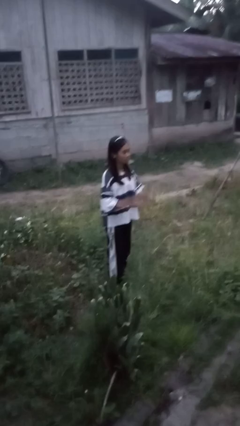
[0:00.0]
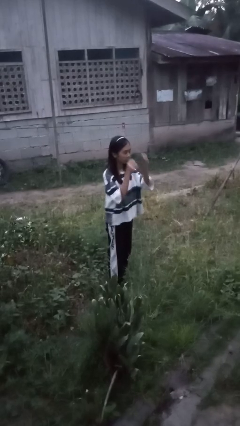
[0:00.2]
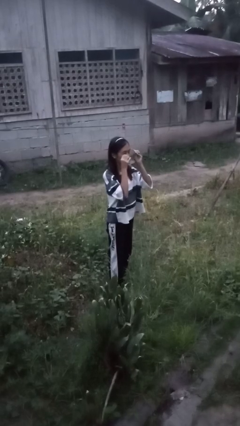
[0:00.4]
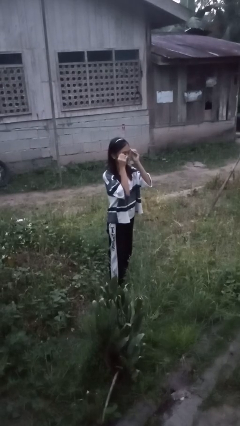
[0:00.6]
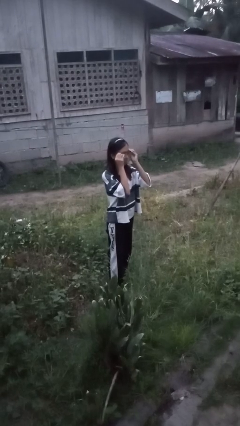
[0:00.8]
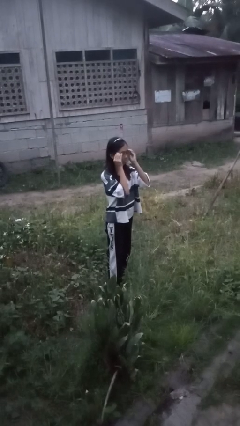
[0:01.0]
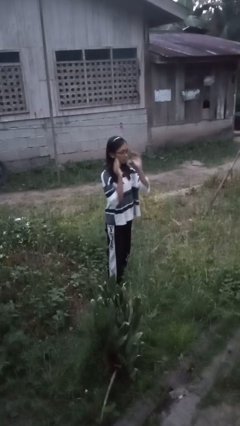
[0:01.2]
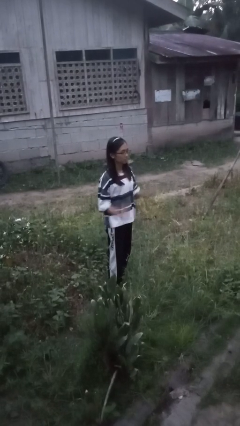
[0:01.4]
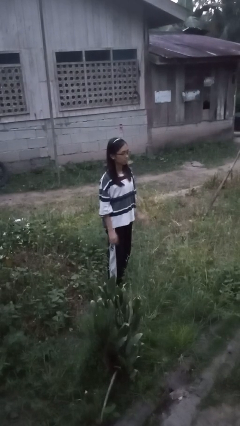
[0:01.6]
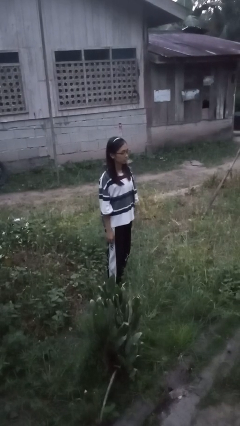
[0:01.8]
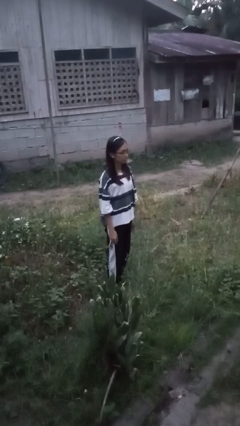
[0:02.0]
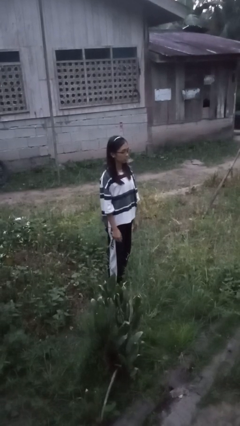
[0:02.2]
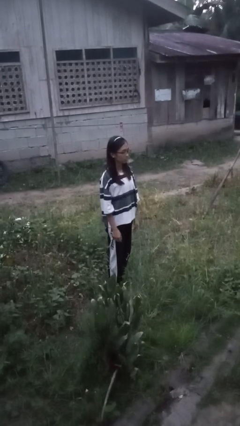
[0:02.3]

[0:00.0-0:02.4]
person puts on glasses

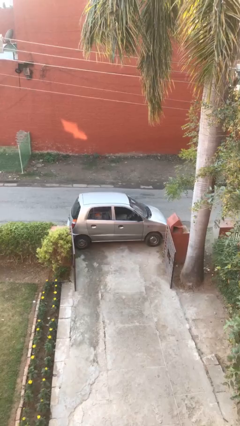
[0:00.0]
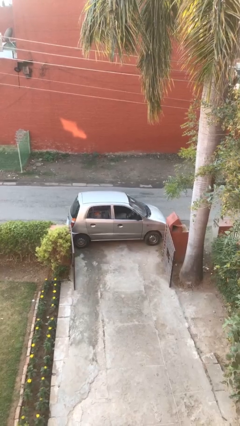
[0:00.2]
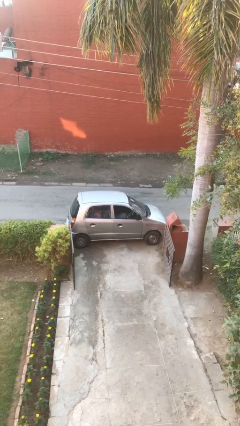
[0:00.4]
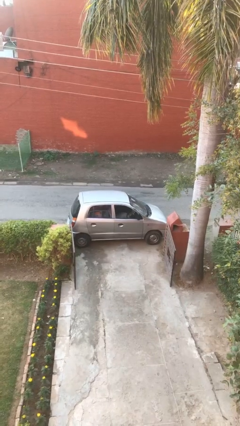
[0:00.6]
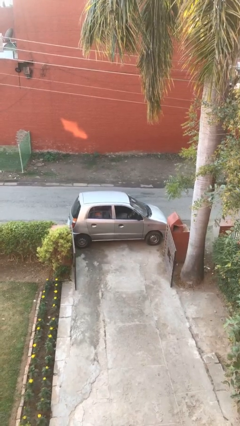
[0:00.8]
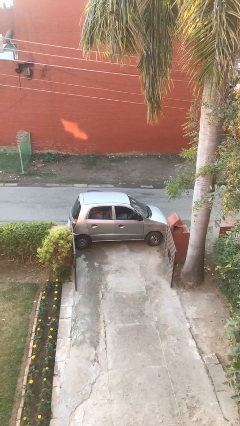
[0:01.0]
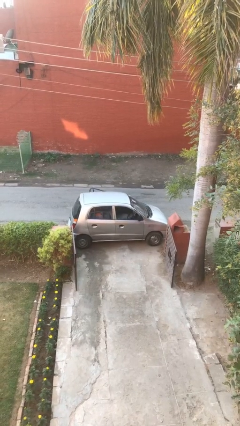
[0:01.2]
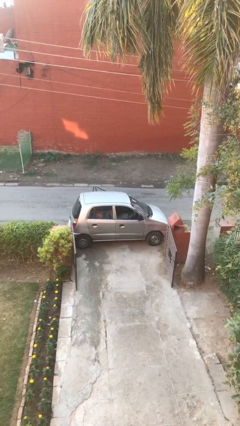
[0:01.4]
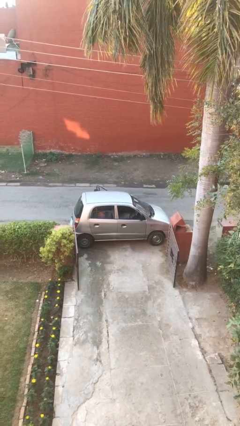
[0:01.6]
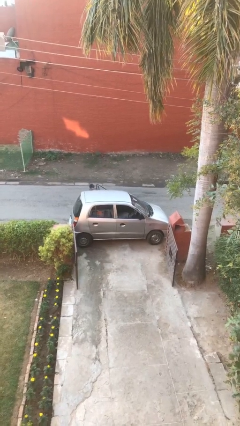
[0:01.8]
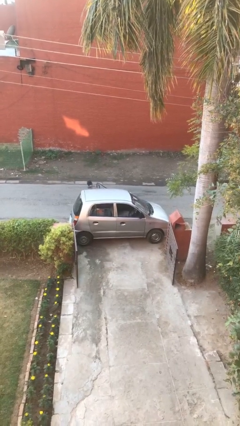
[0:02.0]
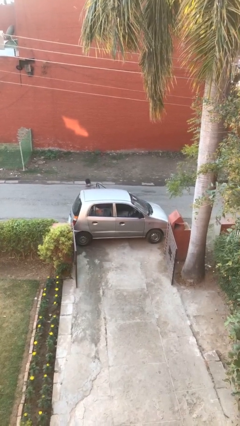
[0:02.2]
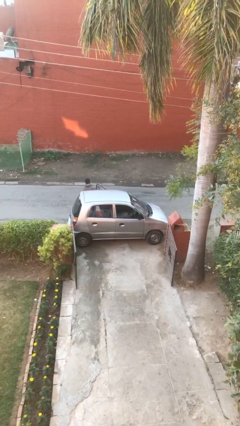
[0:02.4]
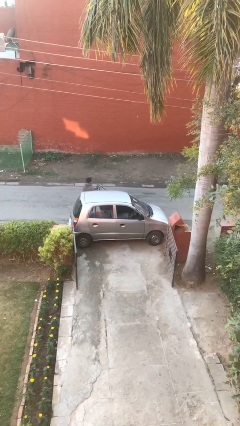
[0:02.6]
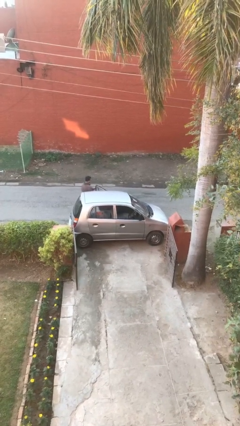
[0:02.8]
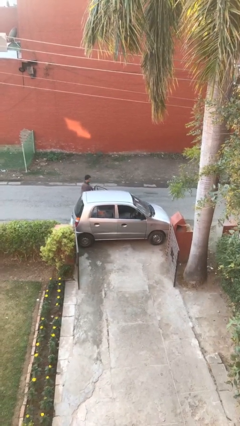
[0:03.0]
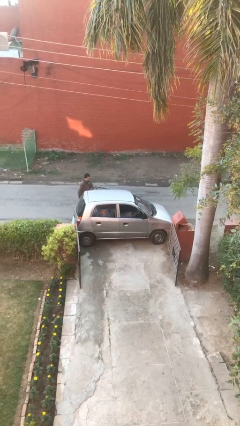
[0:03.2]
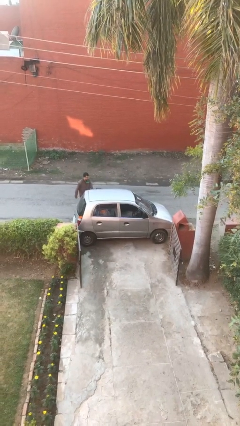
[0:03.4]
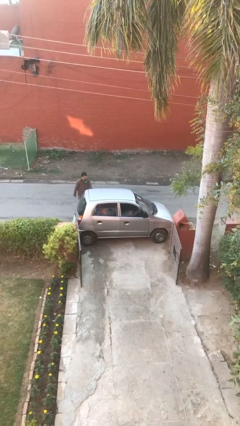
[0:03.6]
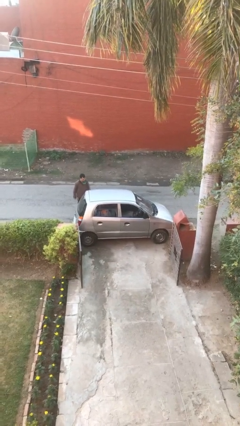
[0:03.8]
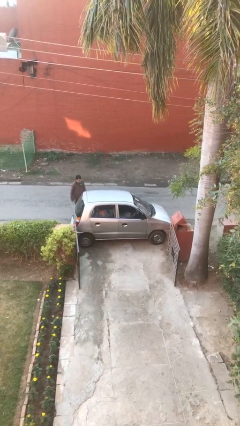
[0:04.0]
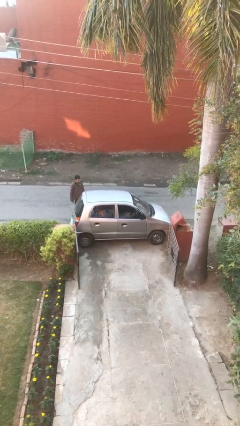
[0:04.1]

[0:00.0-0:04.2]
car drops off person

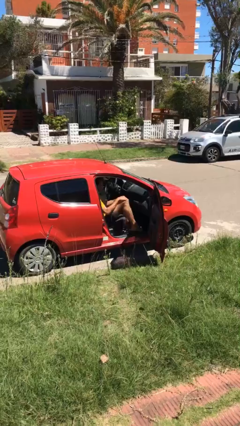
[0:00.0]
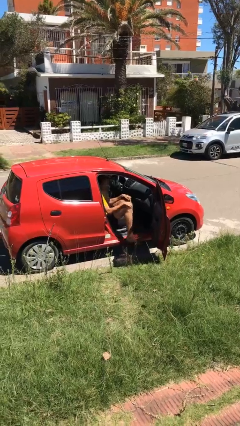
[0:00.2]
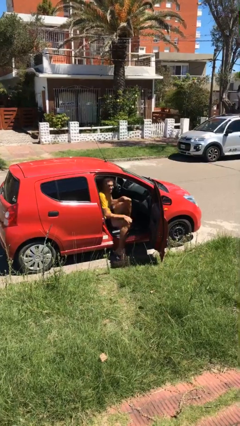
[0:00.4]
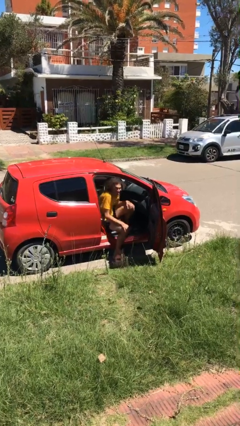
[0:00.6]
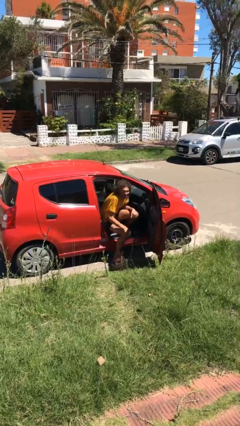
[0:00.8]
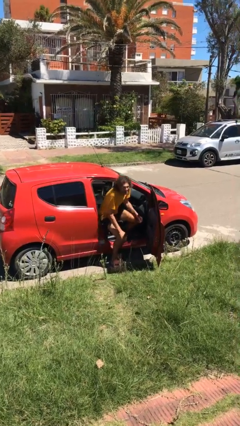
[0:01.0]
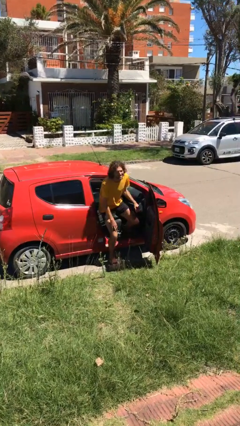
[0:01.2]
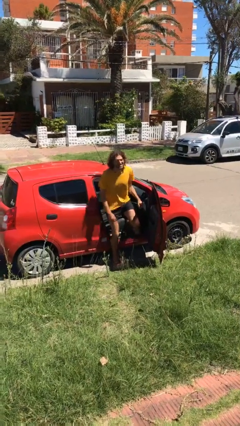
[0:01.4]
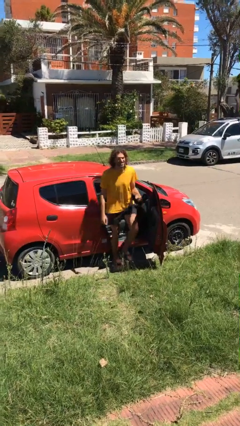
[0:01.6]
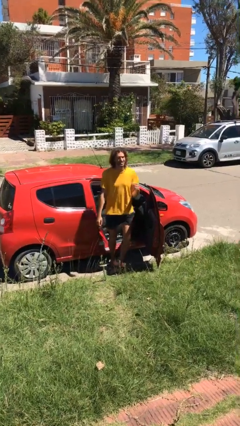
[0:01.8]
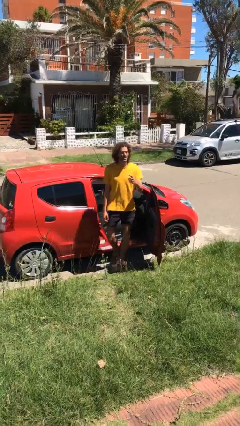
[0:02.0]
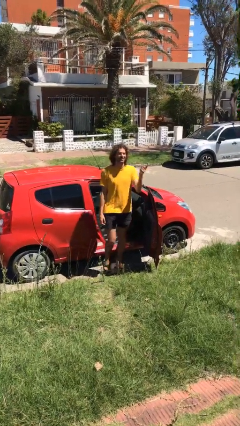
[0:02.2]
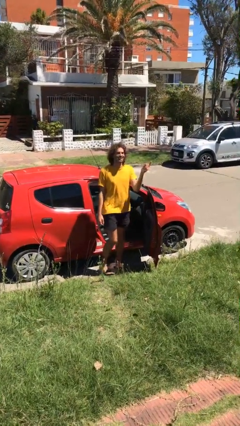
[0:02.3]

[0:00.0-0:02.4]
person exits car

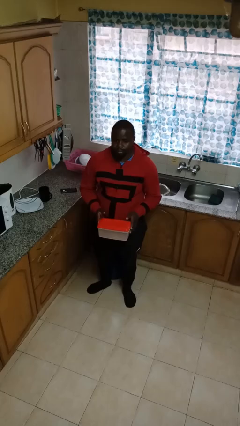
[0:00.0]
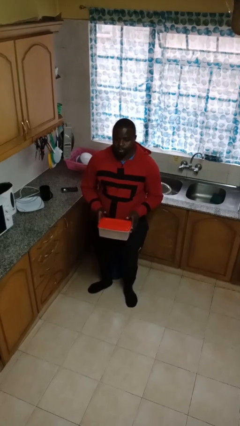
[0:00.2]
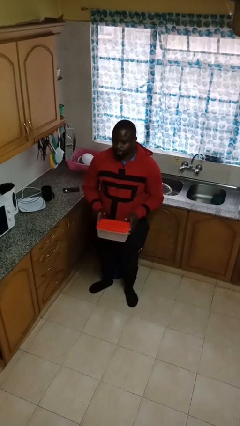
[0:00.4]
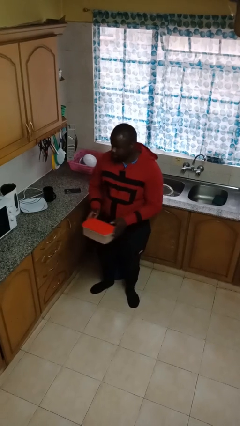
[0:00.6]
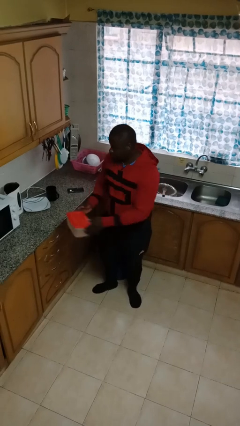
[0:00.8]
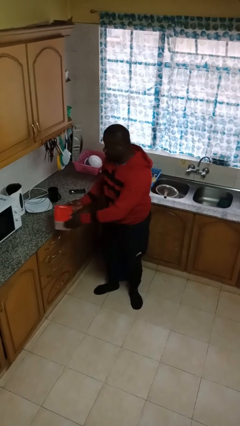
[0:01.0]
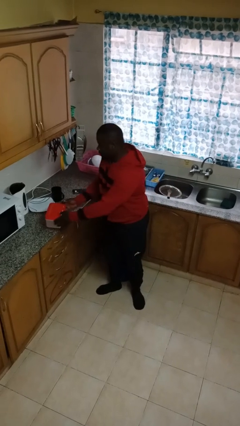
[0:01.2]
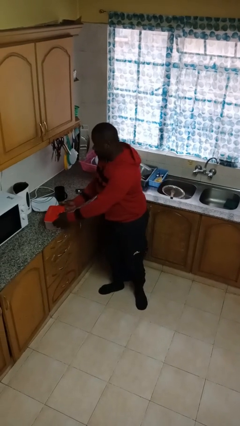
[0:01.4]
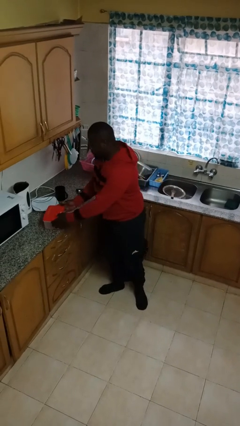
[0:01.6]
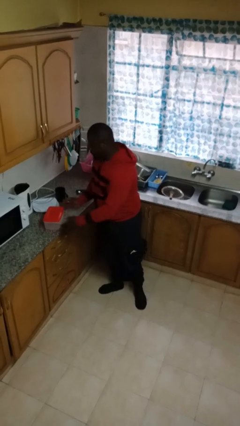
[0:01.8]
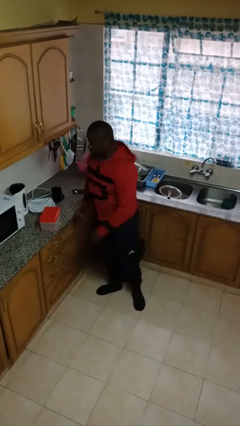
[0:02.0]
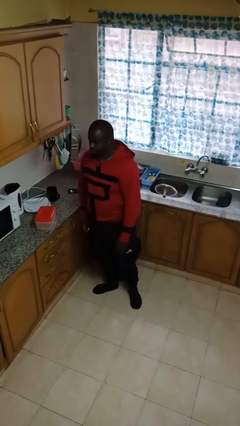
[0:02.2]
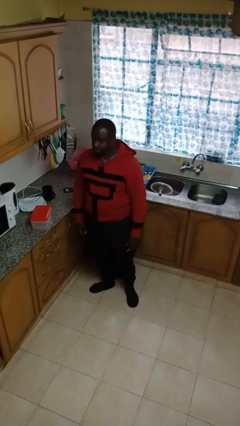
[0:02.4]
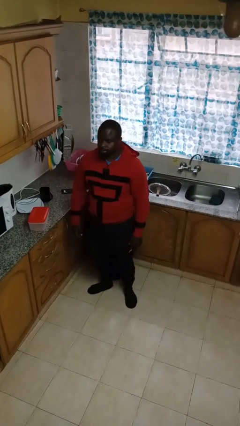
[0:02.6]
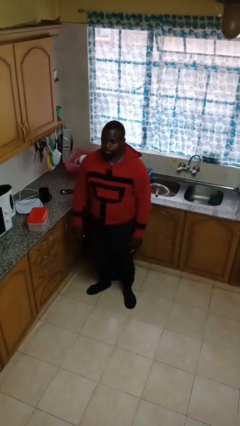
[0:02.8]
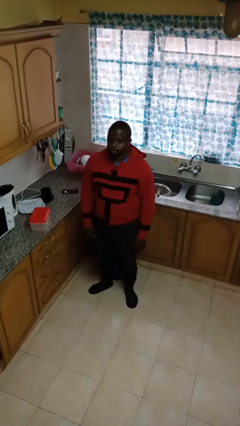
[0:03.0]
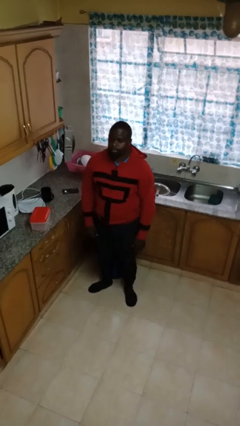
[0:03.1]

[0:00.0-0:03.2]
person puts down object on countertop

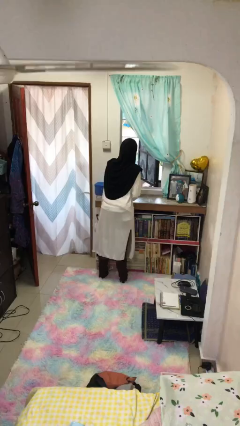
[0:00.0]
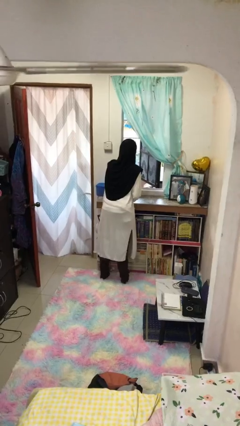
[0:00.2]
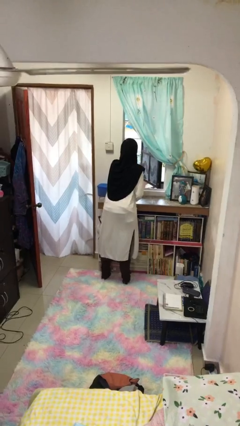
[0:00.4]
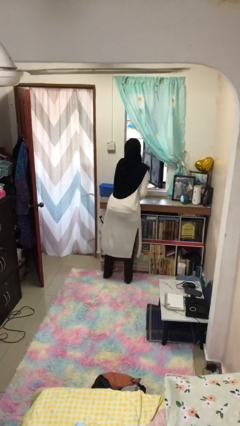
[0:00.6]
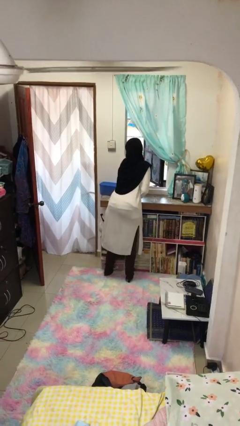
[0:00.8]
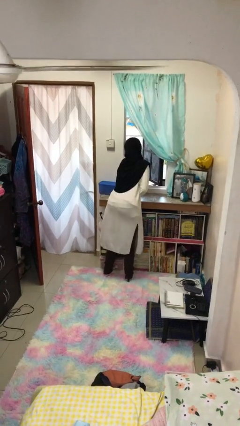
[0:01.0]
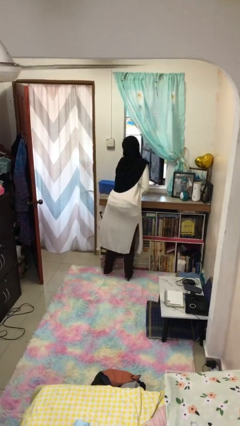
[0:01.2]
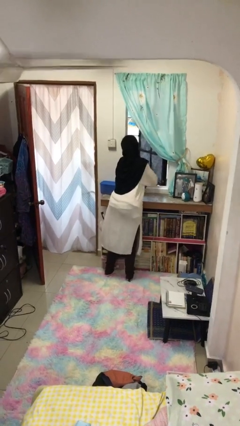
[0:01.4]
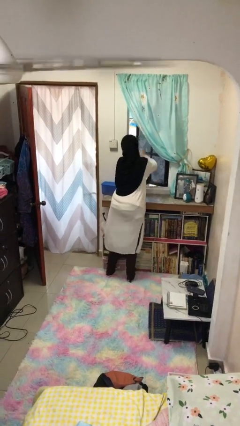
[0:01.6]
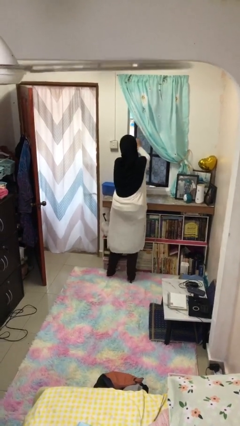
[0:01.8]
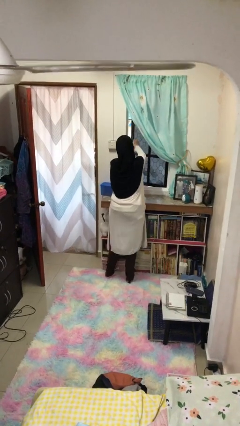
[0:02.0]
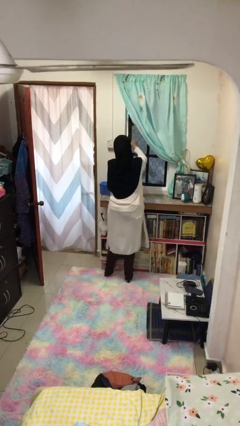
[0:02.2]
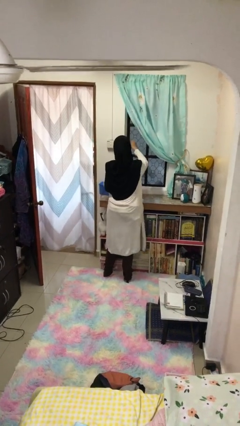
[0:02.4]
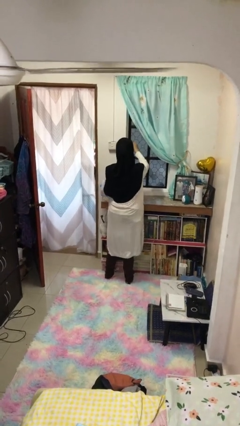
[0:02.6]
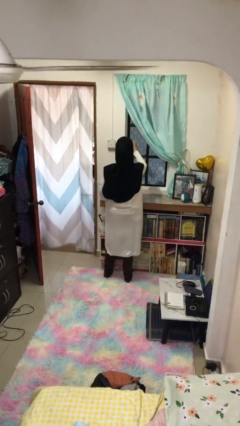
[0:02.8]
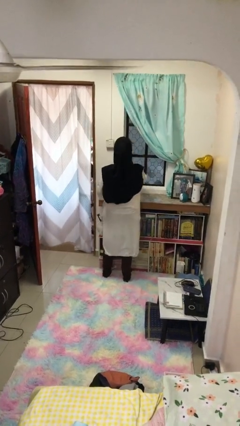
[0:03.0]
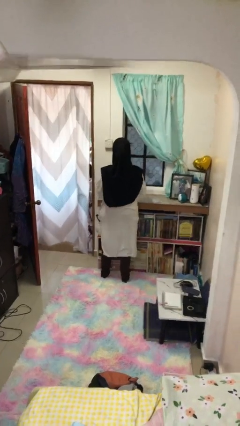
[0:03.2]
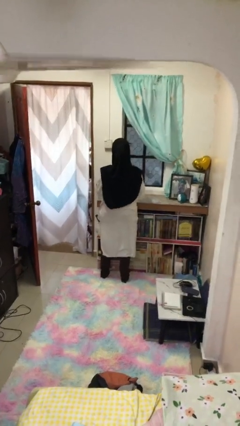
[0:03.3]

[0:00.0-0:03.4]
person closes home window

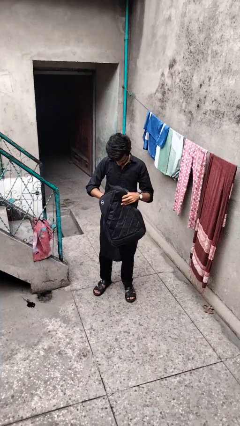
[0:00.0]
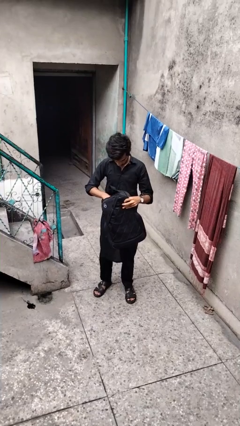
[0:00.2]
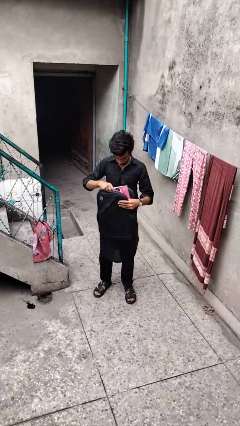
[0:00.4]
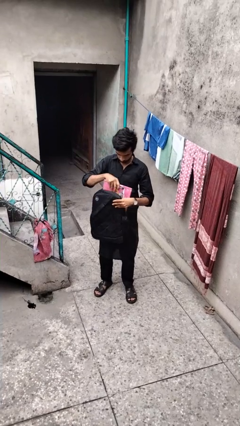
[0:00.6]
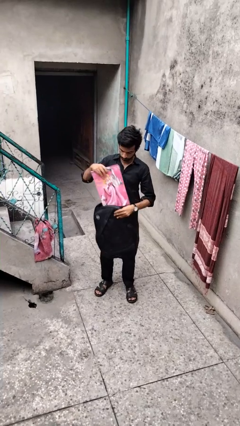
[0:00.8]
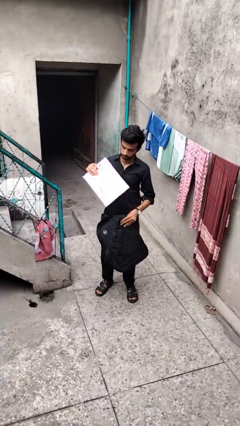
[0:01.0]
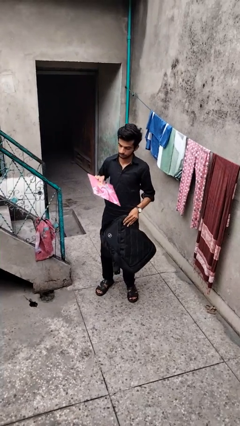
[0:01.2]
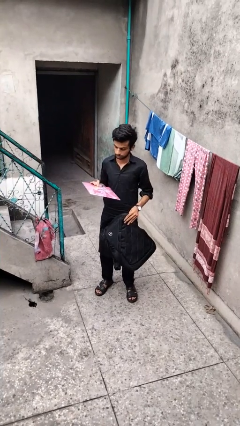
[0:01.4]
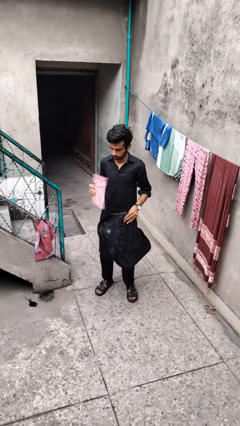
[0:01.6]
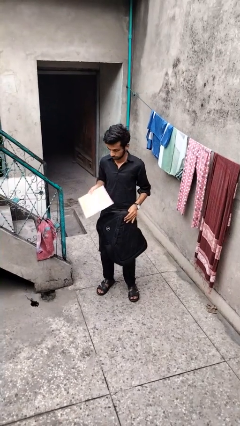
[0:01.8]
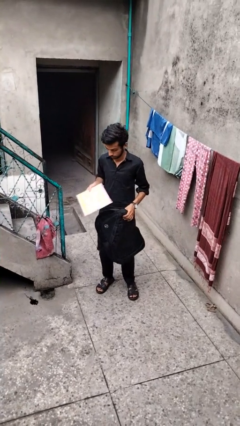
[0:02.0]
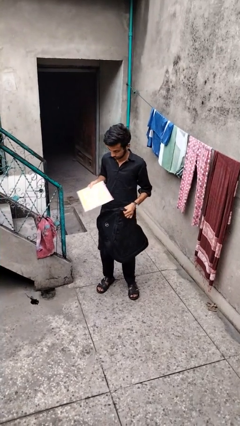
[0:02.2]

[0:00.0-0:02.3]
person takes object from backpack
